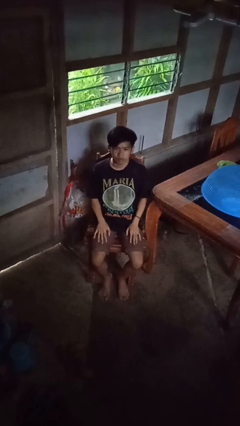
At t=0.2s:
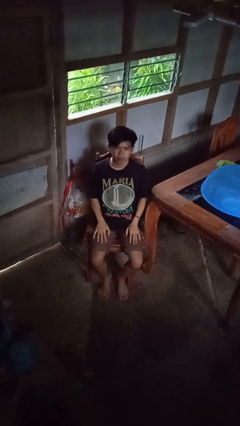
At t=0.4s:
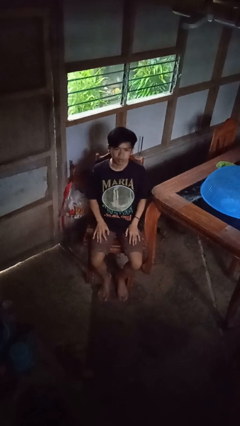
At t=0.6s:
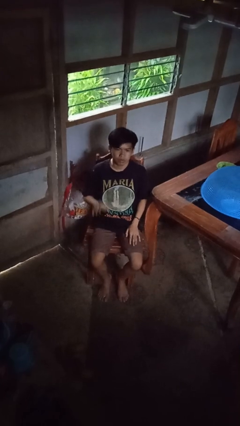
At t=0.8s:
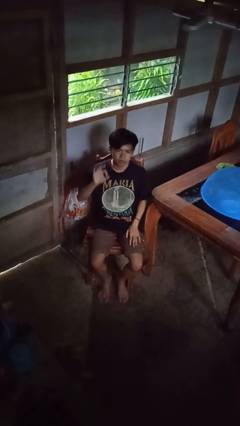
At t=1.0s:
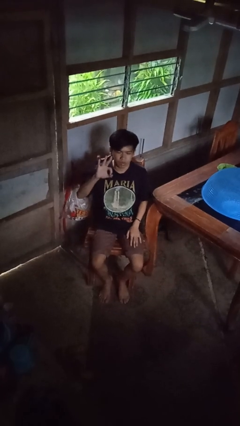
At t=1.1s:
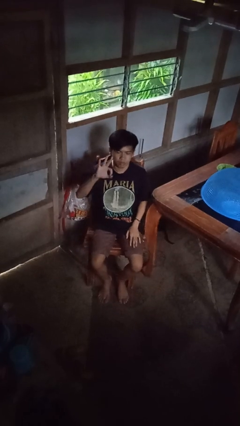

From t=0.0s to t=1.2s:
person gestures number three

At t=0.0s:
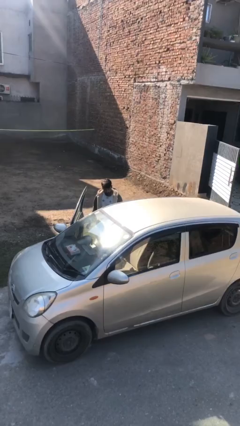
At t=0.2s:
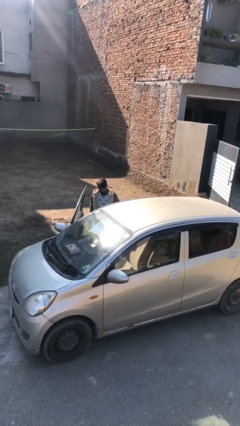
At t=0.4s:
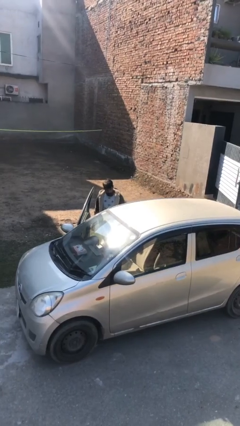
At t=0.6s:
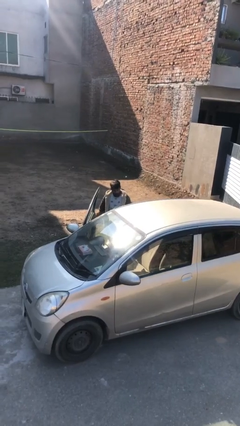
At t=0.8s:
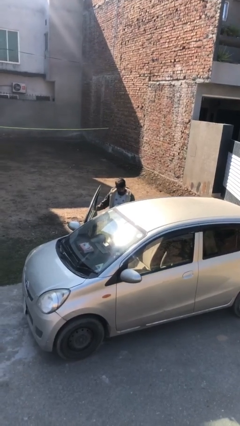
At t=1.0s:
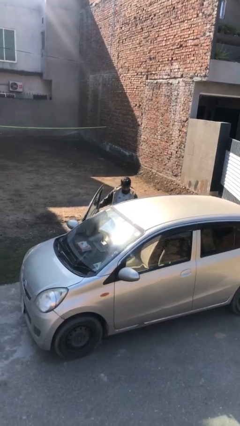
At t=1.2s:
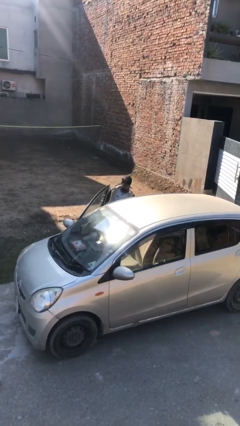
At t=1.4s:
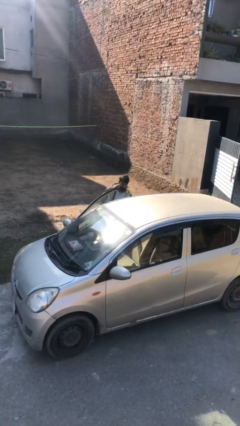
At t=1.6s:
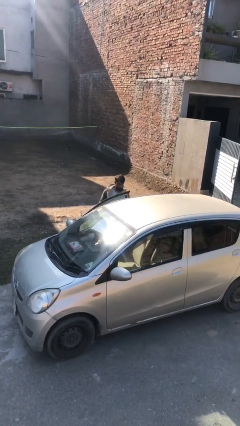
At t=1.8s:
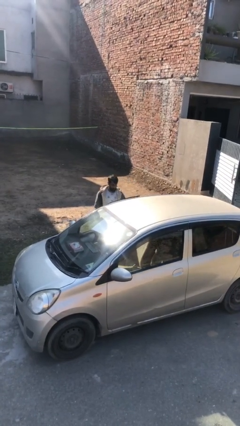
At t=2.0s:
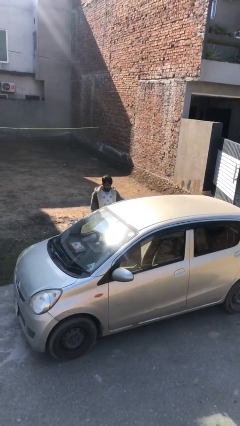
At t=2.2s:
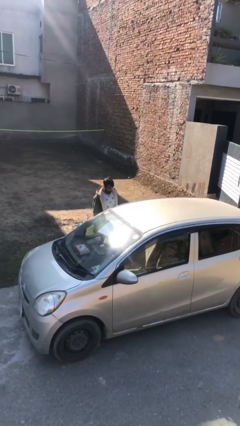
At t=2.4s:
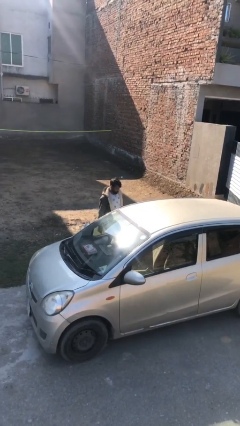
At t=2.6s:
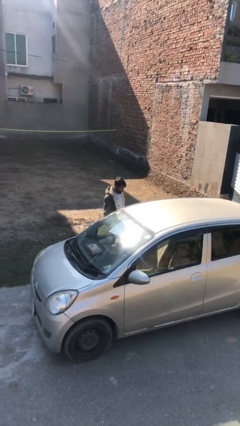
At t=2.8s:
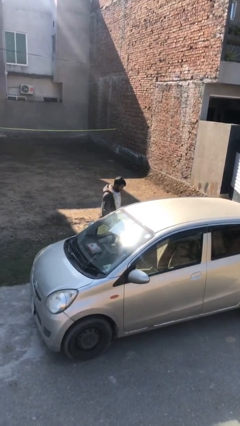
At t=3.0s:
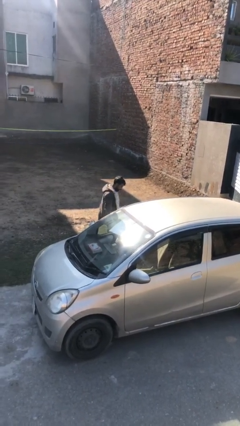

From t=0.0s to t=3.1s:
person closes car door

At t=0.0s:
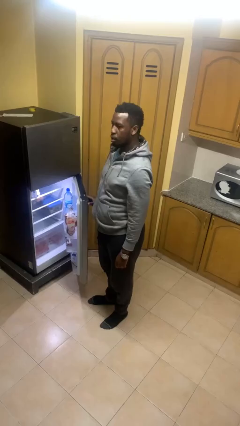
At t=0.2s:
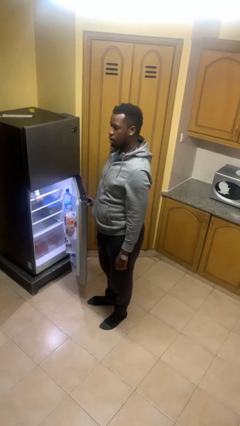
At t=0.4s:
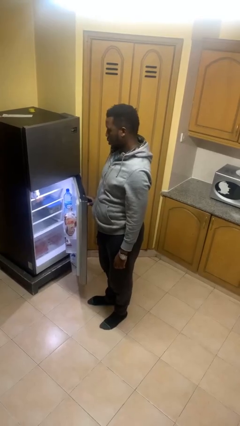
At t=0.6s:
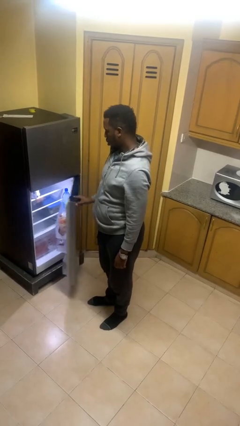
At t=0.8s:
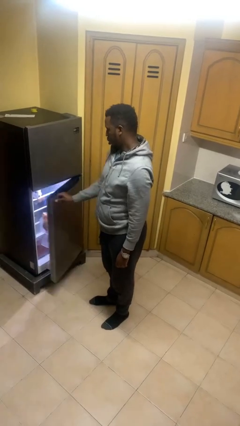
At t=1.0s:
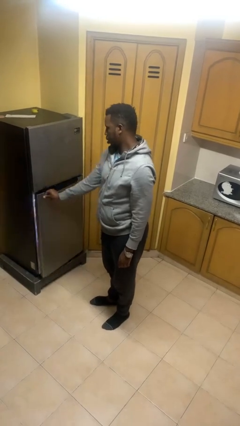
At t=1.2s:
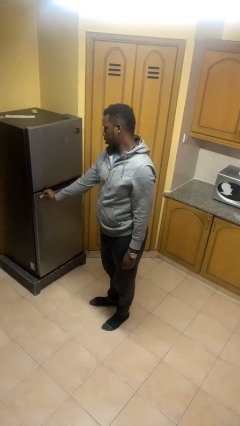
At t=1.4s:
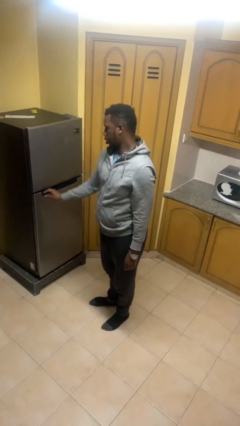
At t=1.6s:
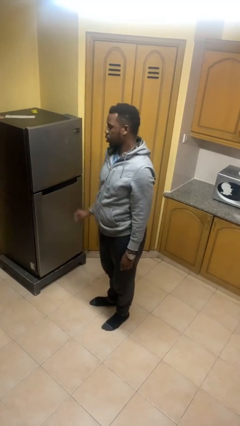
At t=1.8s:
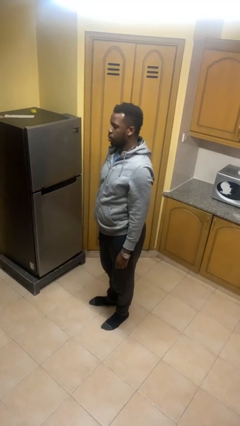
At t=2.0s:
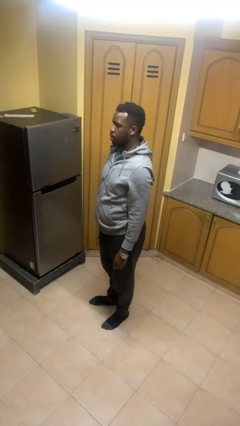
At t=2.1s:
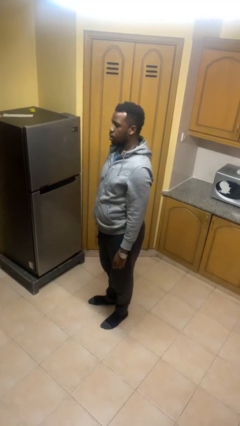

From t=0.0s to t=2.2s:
person closes refrigerator

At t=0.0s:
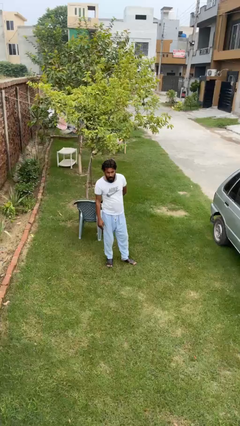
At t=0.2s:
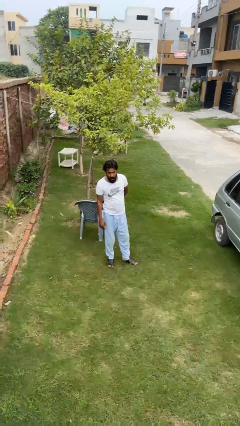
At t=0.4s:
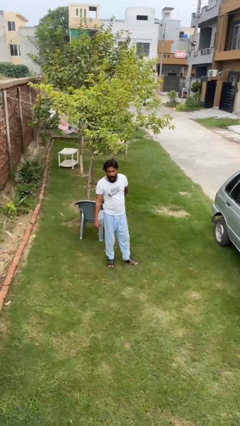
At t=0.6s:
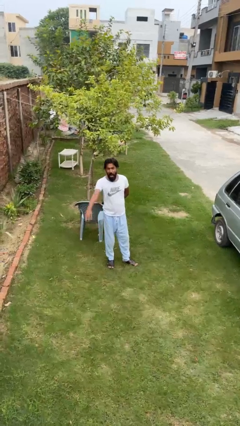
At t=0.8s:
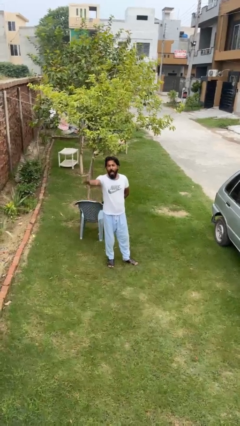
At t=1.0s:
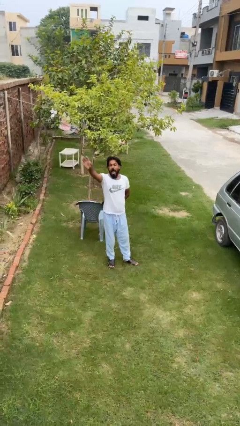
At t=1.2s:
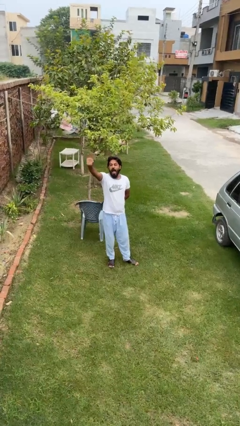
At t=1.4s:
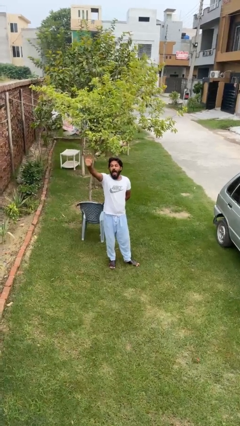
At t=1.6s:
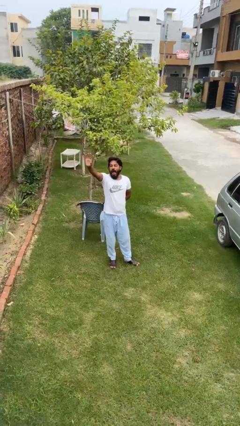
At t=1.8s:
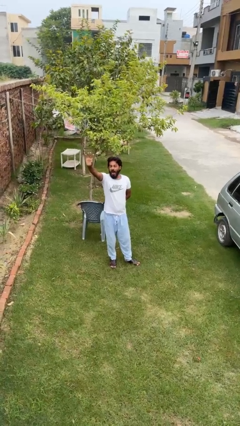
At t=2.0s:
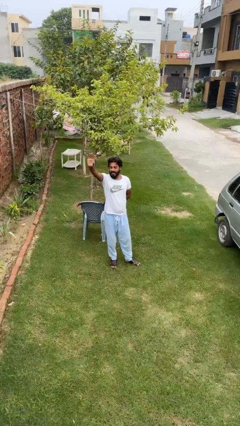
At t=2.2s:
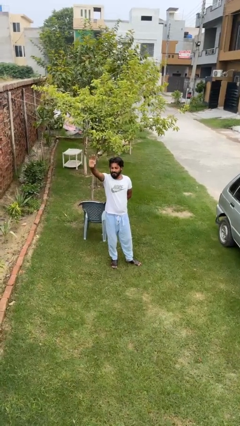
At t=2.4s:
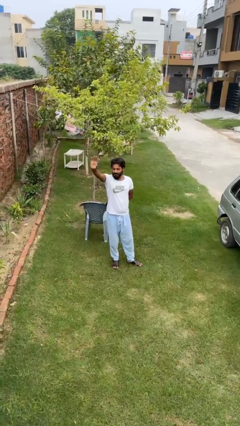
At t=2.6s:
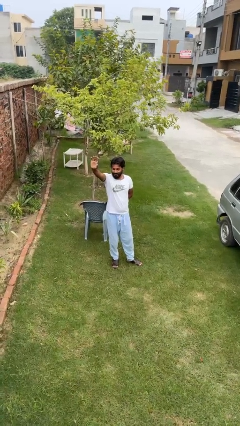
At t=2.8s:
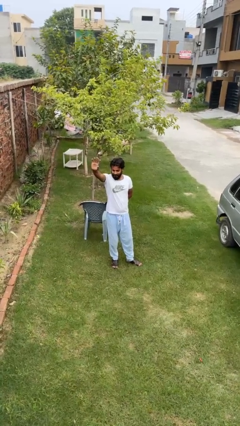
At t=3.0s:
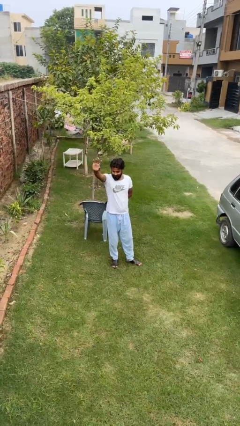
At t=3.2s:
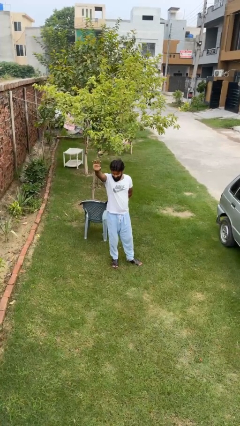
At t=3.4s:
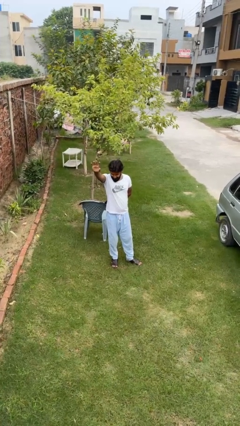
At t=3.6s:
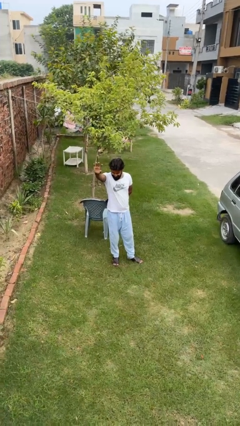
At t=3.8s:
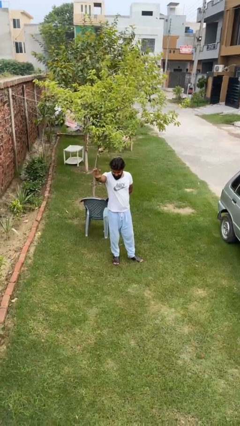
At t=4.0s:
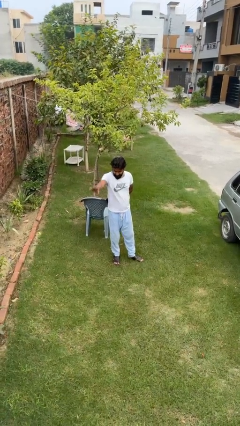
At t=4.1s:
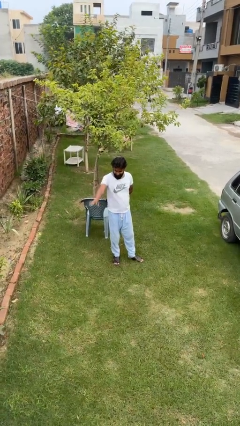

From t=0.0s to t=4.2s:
person waves at person

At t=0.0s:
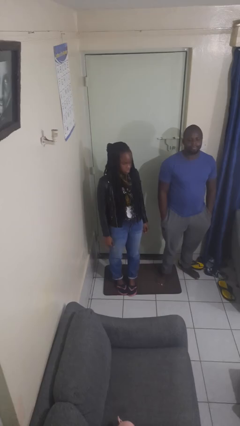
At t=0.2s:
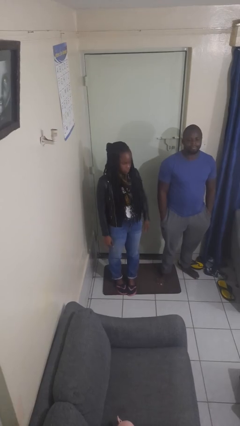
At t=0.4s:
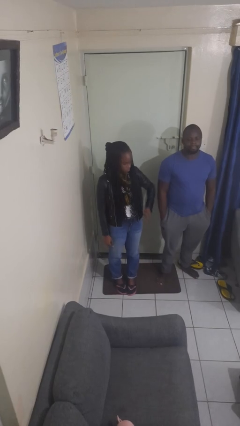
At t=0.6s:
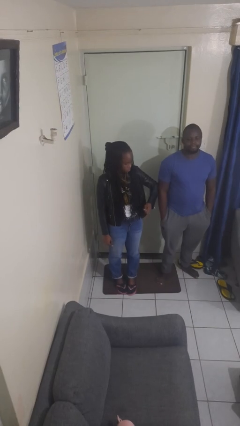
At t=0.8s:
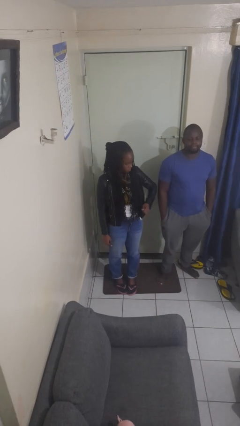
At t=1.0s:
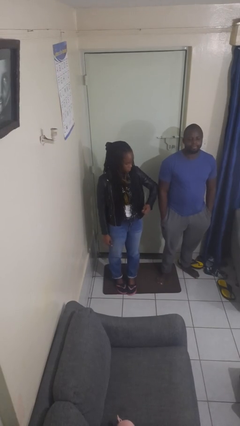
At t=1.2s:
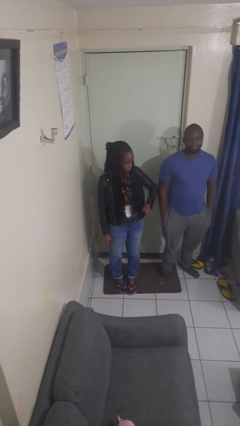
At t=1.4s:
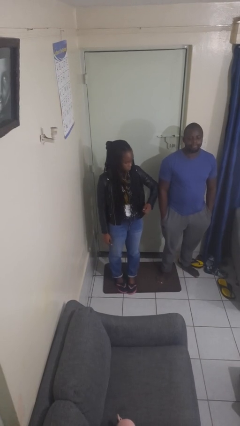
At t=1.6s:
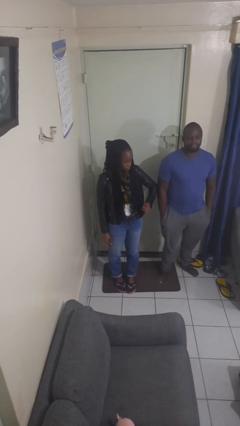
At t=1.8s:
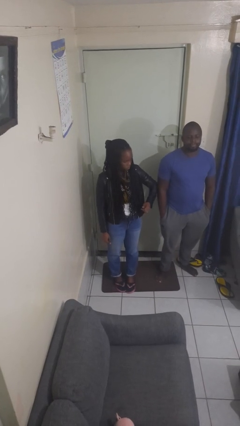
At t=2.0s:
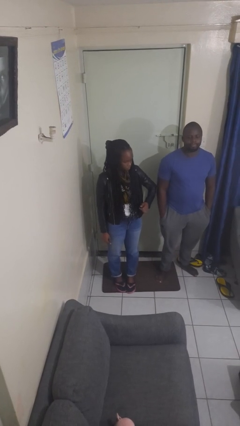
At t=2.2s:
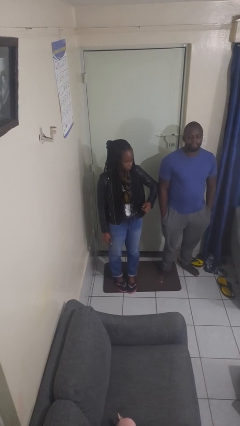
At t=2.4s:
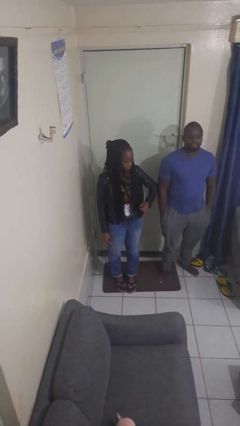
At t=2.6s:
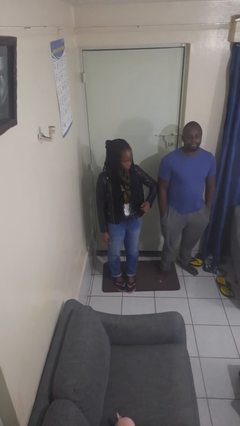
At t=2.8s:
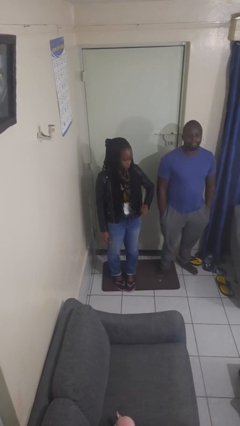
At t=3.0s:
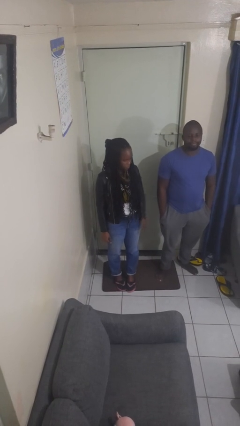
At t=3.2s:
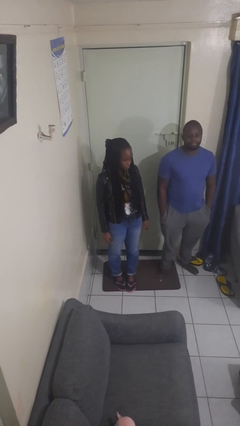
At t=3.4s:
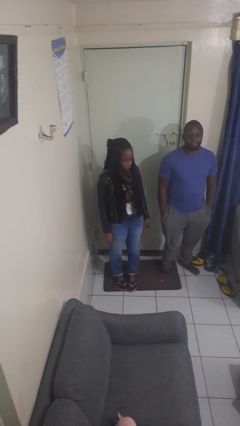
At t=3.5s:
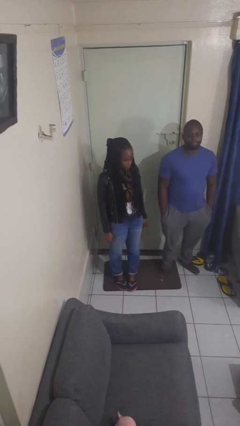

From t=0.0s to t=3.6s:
person nudges person with elbow

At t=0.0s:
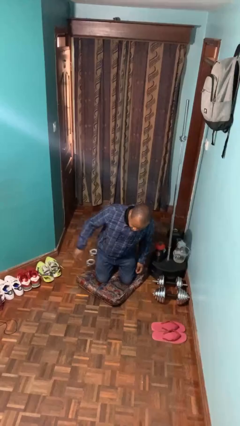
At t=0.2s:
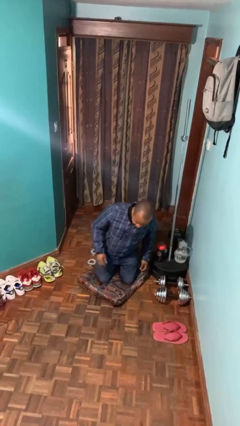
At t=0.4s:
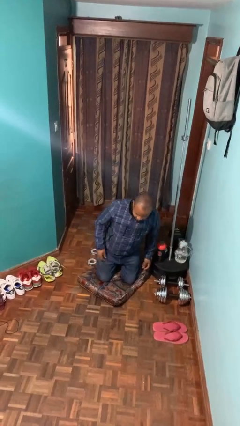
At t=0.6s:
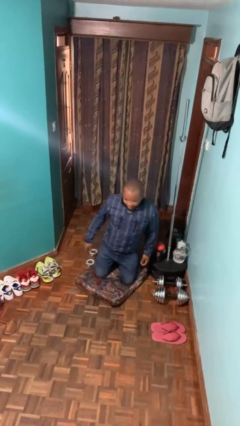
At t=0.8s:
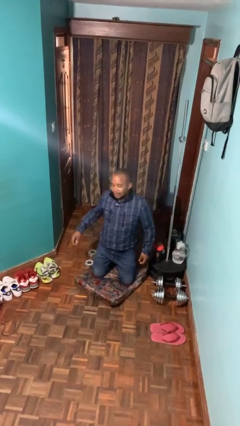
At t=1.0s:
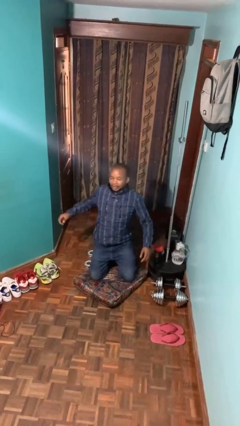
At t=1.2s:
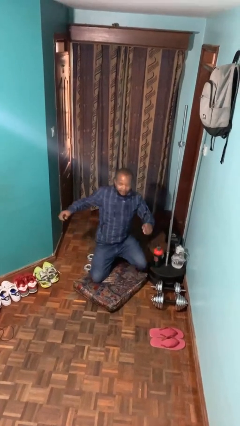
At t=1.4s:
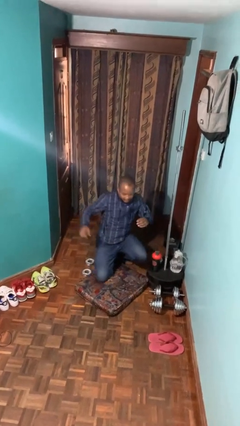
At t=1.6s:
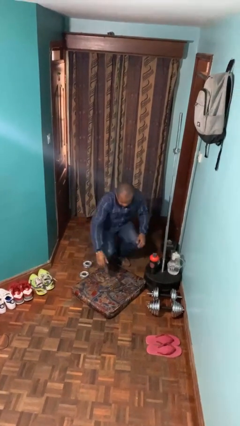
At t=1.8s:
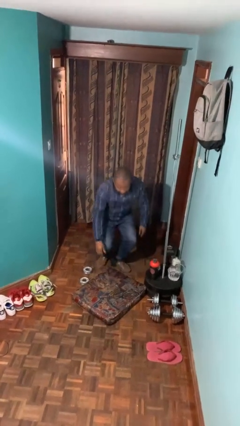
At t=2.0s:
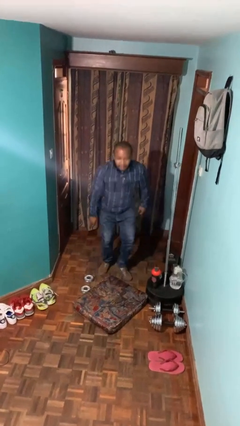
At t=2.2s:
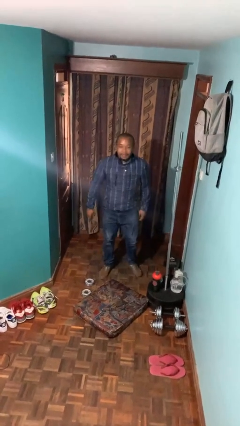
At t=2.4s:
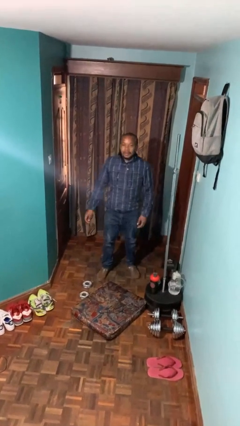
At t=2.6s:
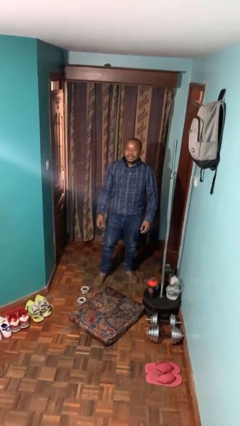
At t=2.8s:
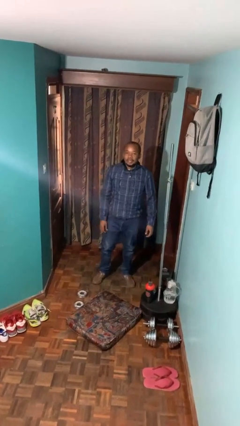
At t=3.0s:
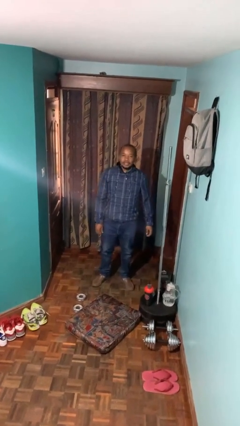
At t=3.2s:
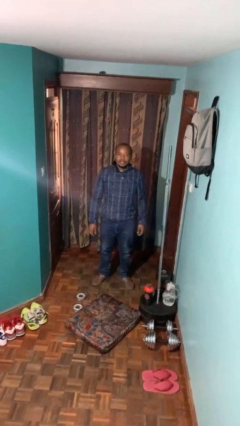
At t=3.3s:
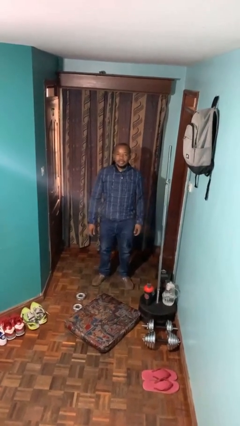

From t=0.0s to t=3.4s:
person stands up from floor
